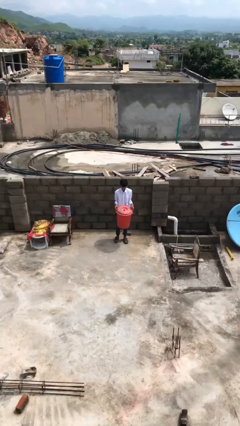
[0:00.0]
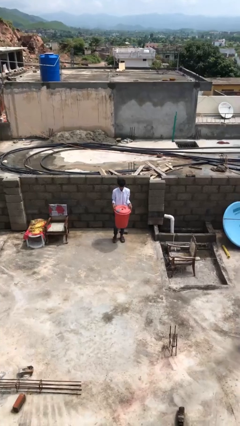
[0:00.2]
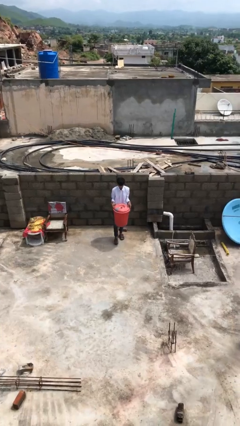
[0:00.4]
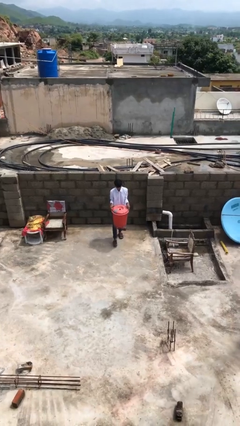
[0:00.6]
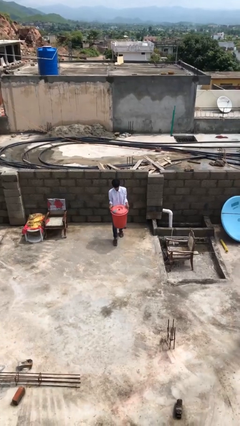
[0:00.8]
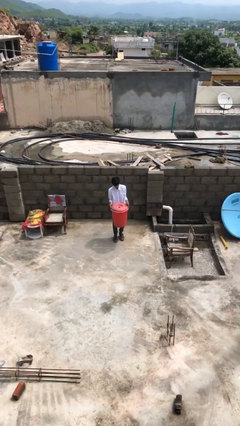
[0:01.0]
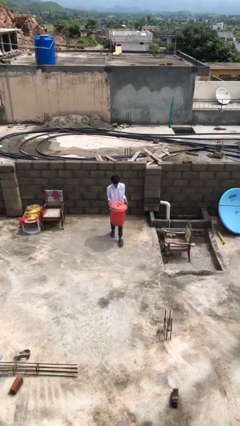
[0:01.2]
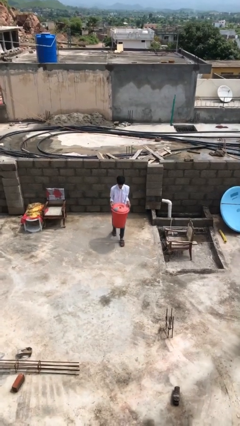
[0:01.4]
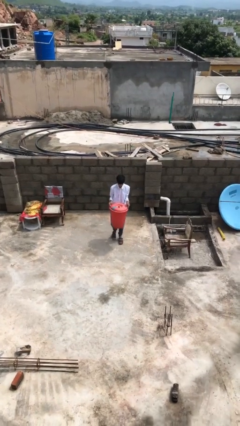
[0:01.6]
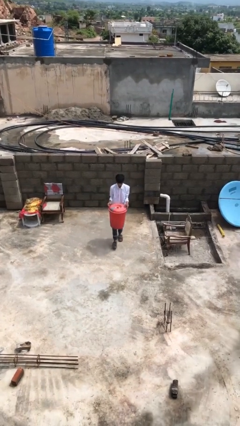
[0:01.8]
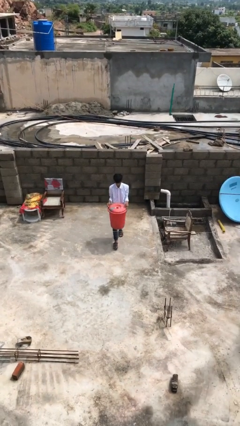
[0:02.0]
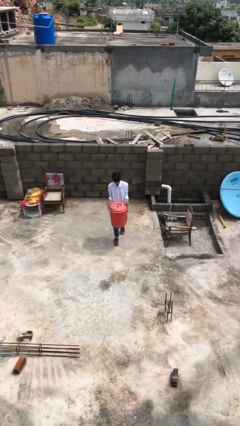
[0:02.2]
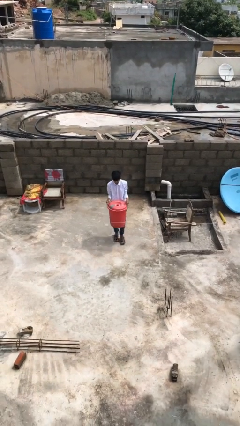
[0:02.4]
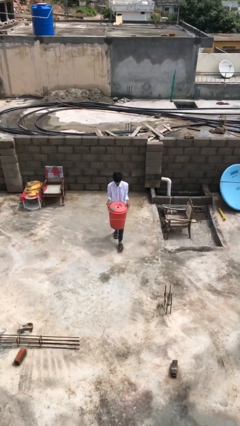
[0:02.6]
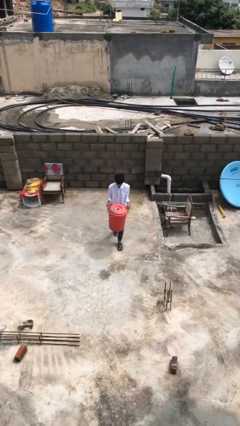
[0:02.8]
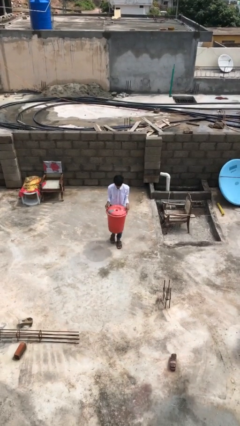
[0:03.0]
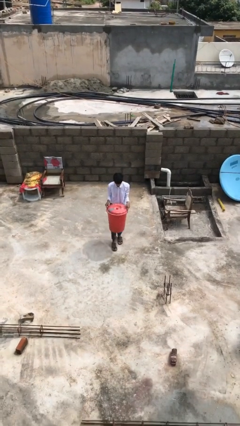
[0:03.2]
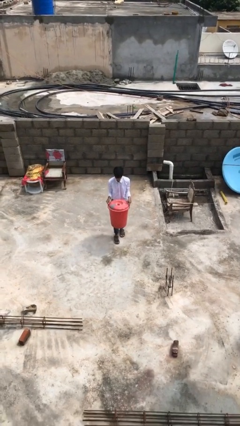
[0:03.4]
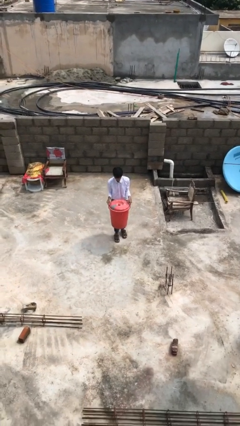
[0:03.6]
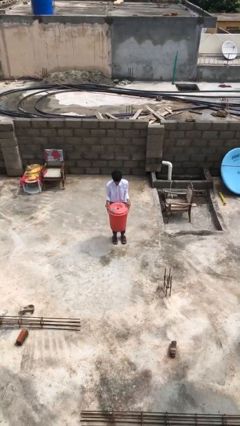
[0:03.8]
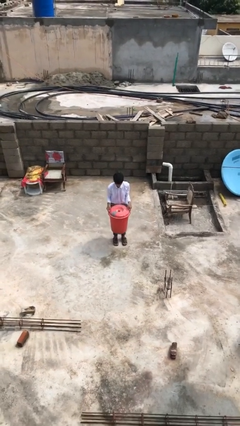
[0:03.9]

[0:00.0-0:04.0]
person carries heavy object

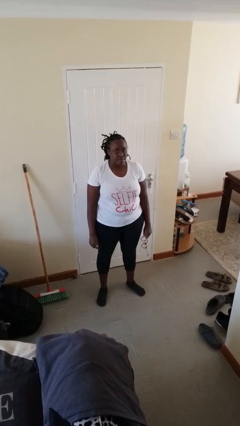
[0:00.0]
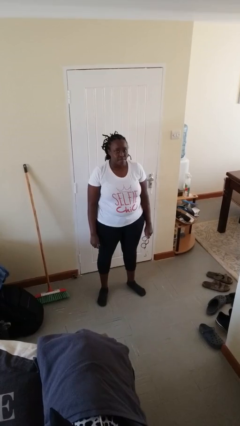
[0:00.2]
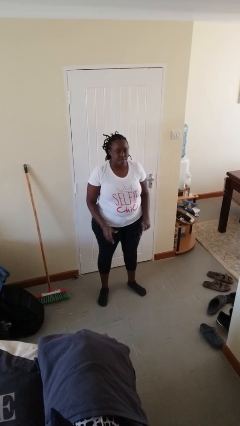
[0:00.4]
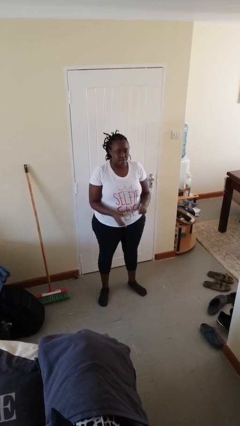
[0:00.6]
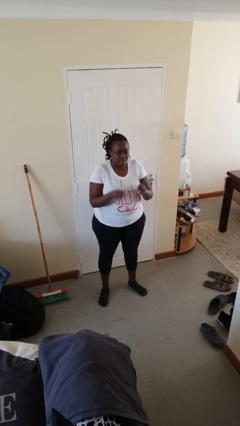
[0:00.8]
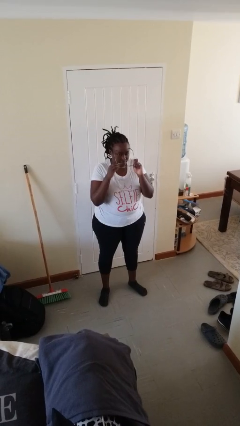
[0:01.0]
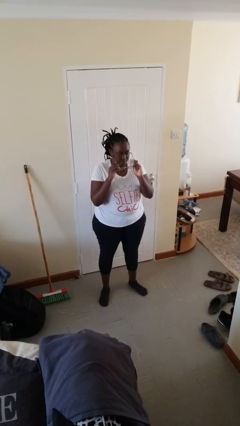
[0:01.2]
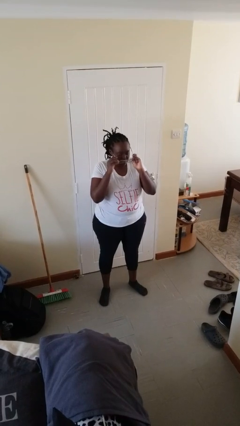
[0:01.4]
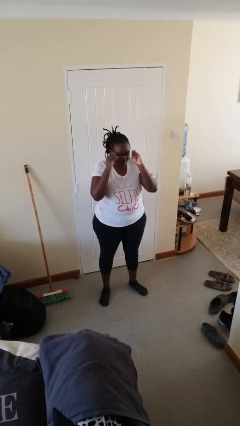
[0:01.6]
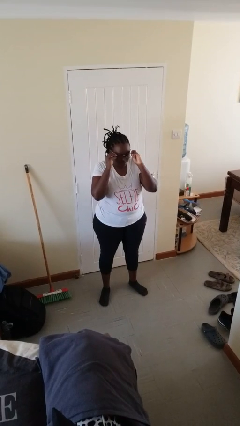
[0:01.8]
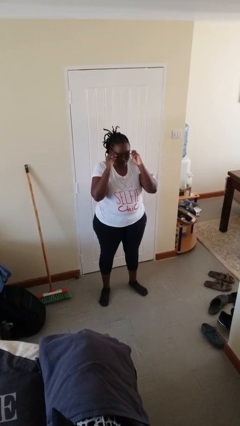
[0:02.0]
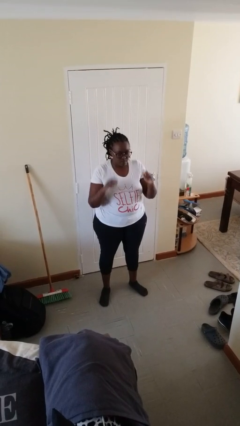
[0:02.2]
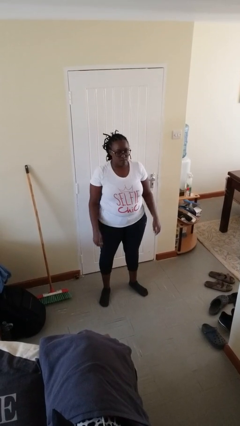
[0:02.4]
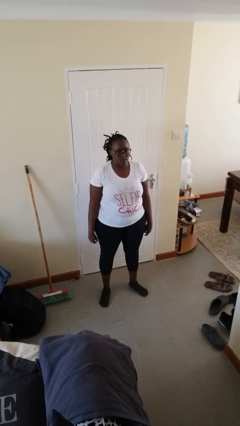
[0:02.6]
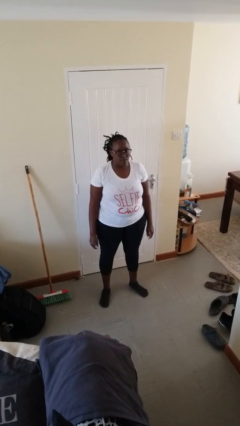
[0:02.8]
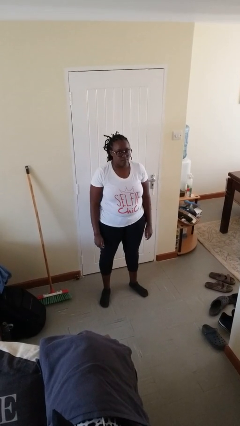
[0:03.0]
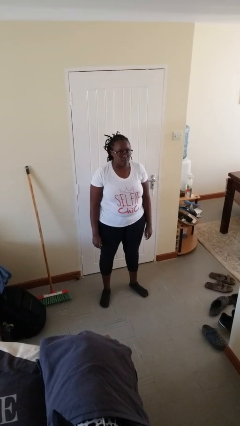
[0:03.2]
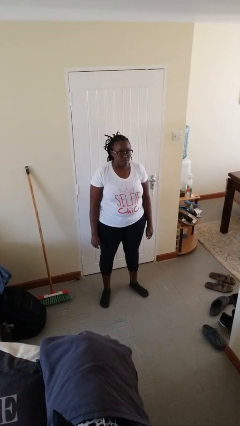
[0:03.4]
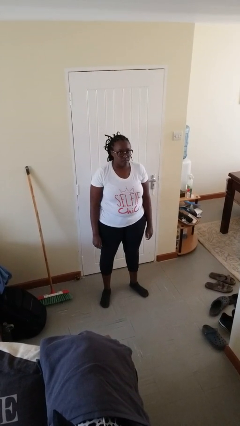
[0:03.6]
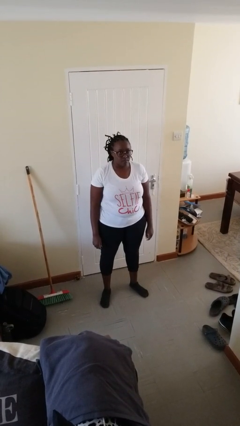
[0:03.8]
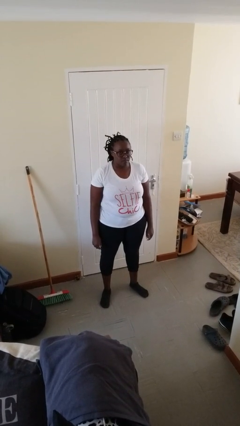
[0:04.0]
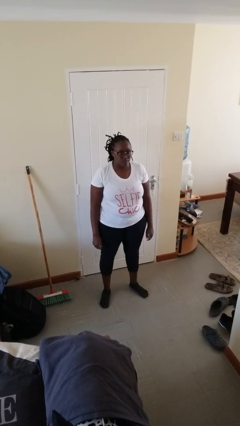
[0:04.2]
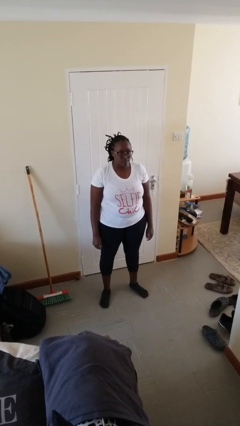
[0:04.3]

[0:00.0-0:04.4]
person puts on glasses

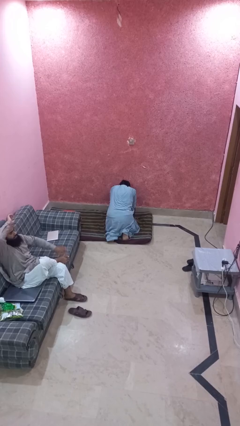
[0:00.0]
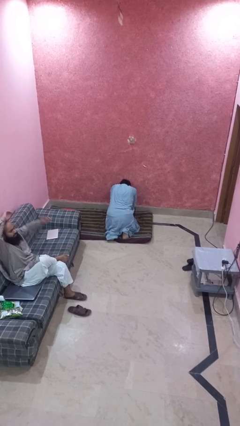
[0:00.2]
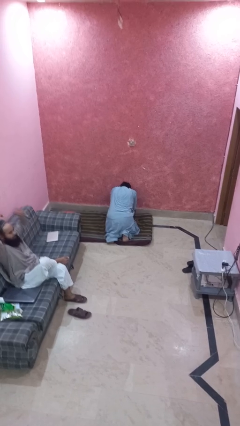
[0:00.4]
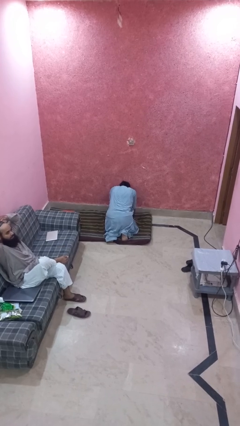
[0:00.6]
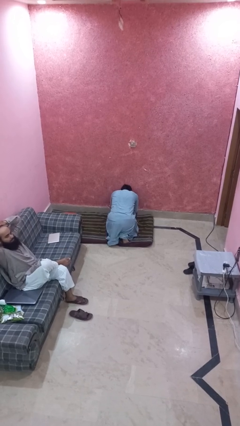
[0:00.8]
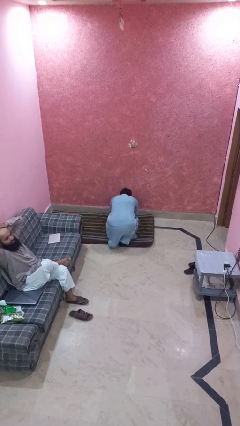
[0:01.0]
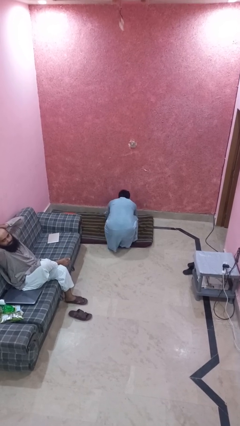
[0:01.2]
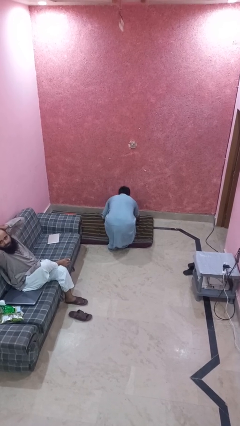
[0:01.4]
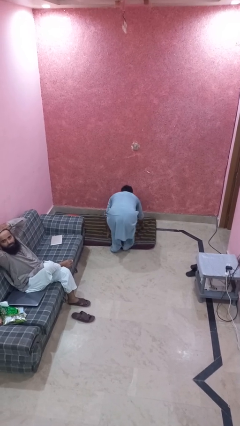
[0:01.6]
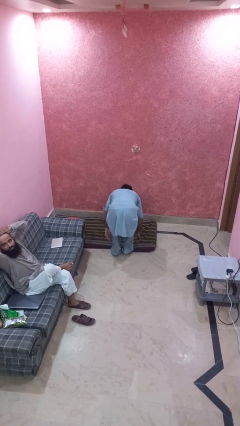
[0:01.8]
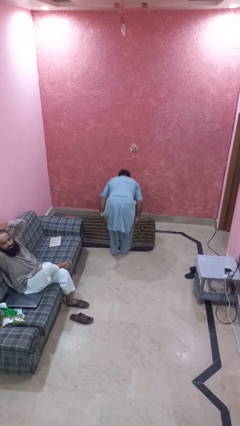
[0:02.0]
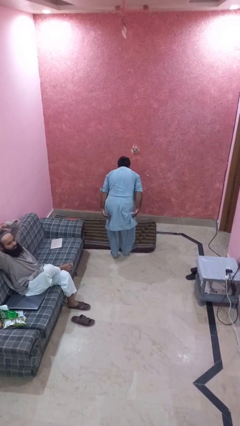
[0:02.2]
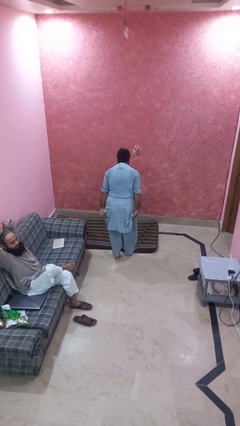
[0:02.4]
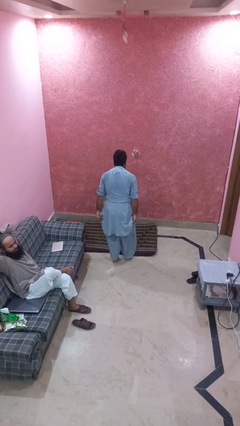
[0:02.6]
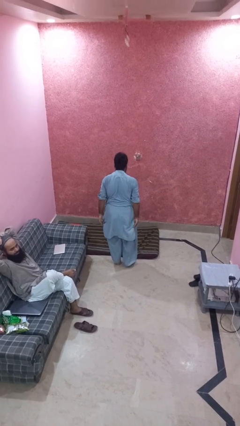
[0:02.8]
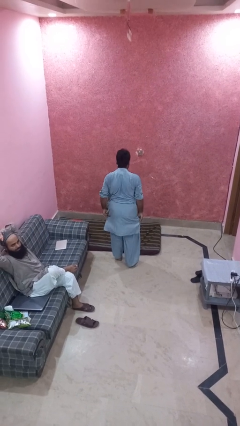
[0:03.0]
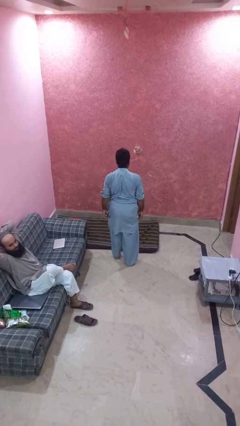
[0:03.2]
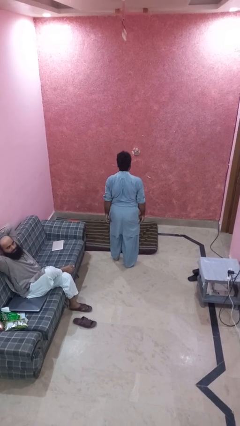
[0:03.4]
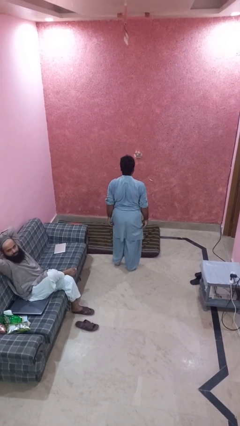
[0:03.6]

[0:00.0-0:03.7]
person stands up from floor

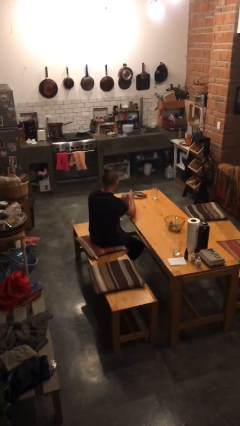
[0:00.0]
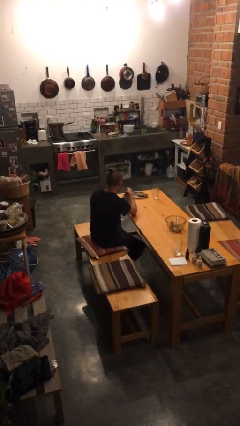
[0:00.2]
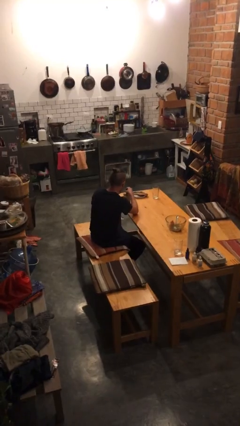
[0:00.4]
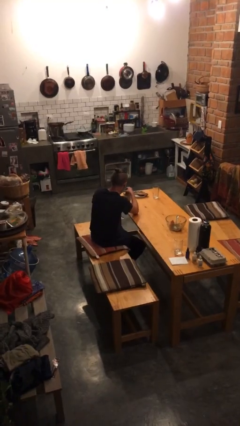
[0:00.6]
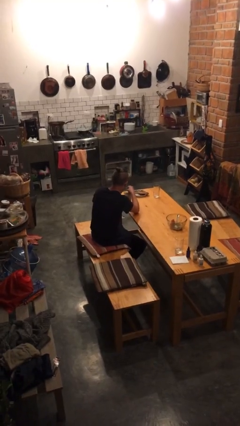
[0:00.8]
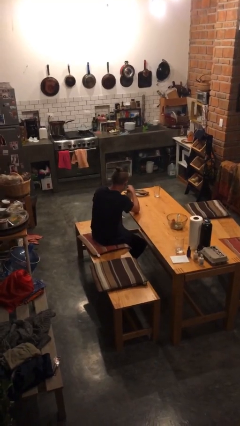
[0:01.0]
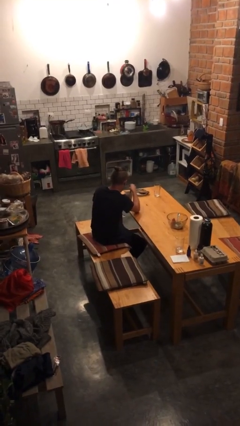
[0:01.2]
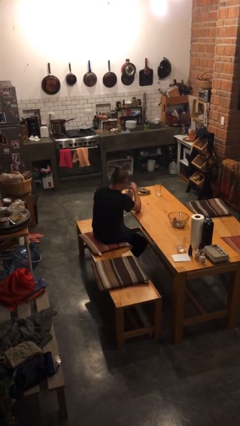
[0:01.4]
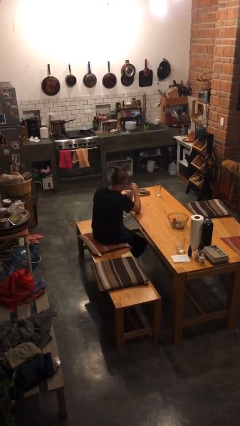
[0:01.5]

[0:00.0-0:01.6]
person stirs mug

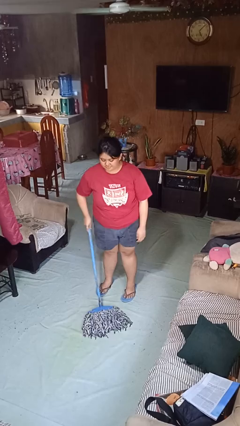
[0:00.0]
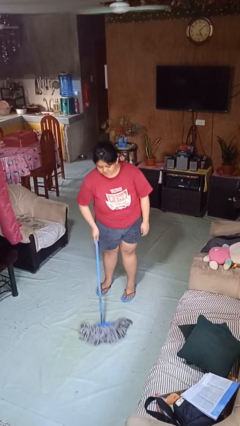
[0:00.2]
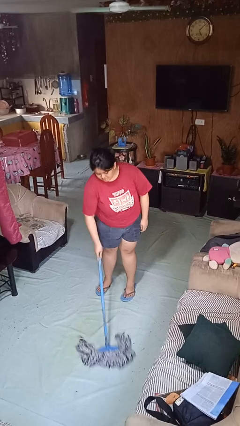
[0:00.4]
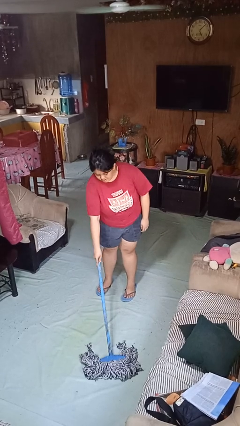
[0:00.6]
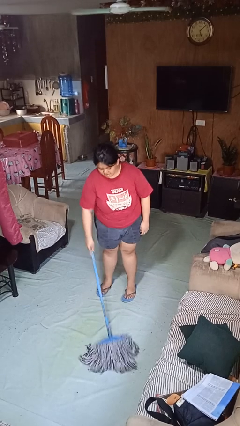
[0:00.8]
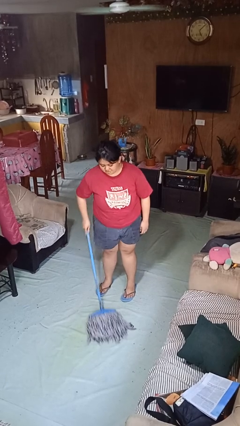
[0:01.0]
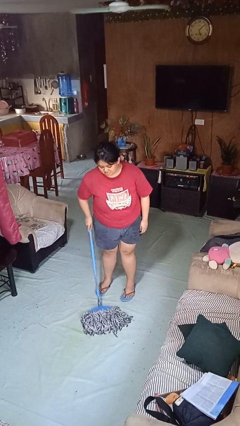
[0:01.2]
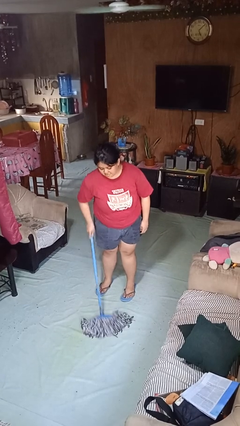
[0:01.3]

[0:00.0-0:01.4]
person mops

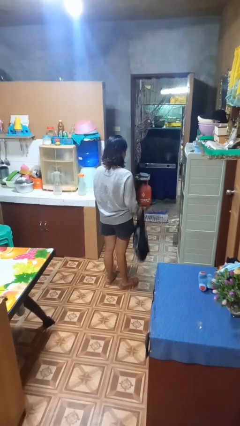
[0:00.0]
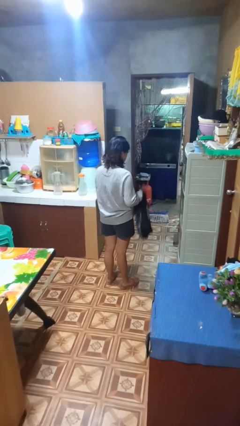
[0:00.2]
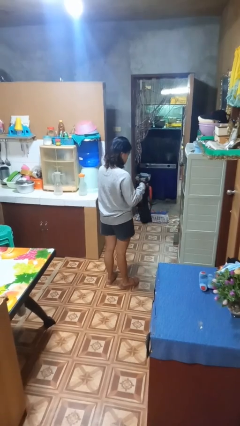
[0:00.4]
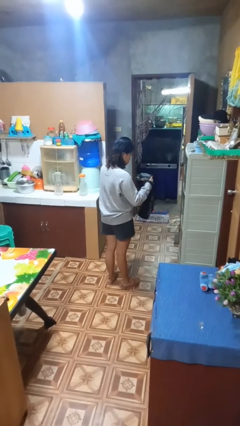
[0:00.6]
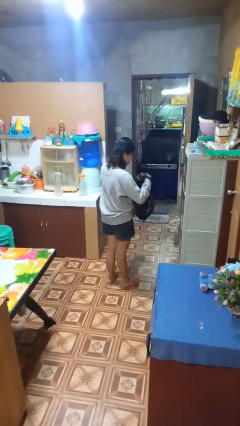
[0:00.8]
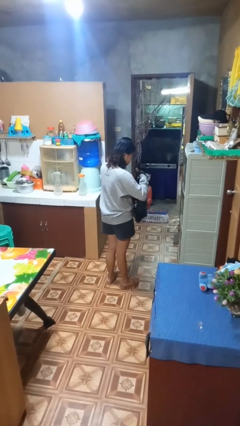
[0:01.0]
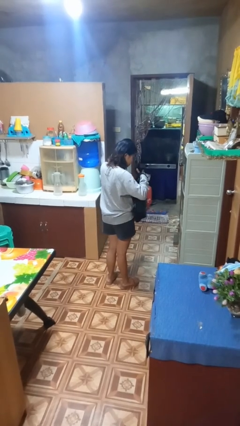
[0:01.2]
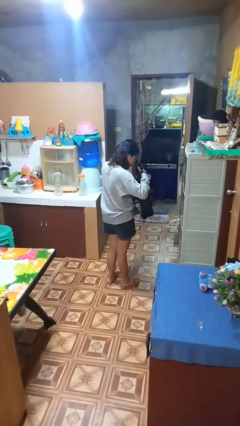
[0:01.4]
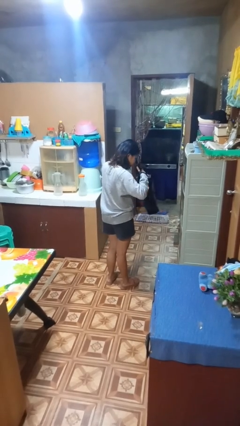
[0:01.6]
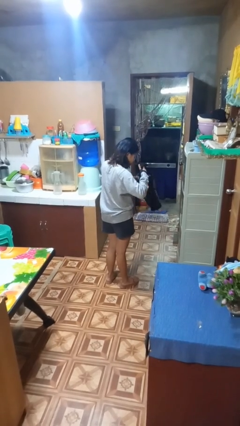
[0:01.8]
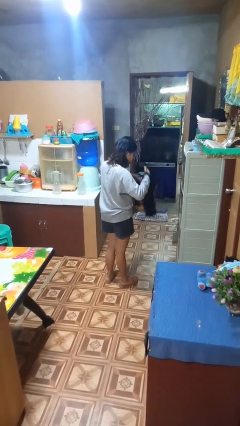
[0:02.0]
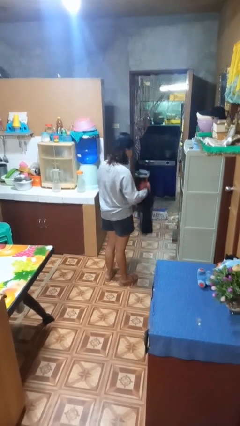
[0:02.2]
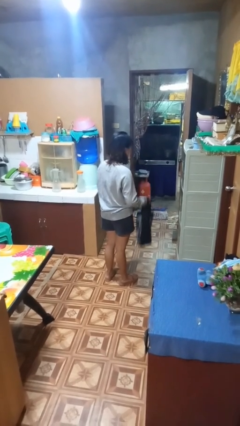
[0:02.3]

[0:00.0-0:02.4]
person searches in bag
